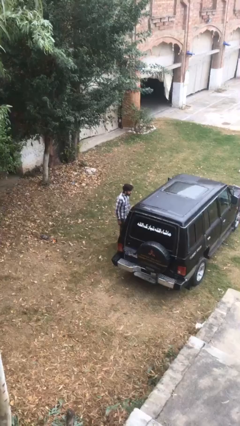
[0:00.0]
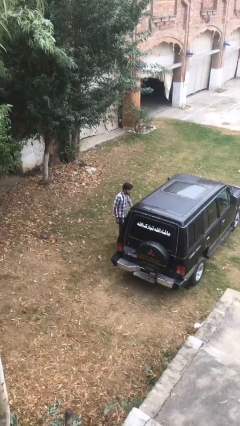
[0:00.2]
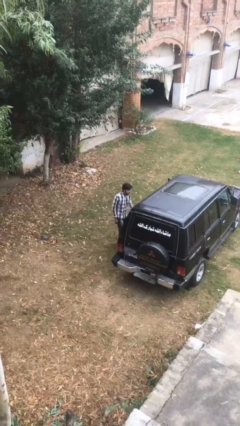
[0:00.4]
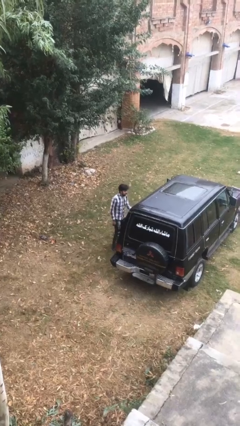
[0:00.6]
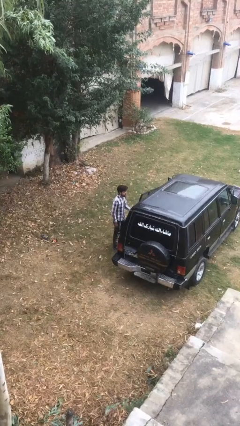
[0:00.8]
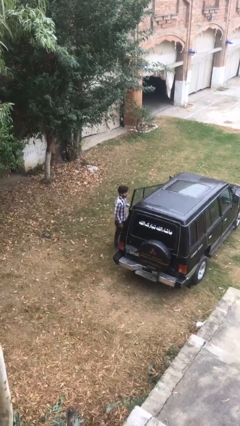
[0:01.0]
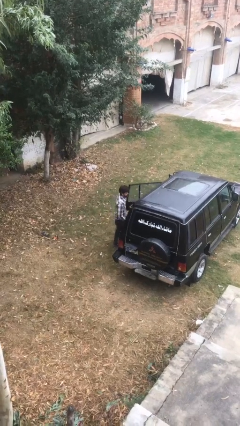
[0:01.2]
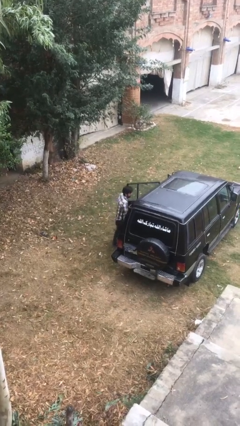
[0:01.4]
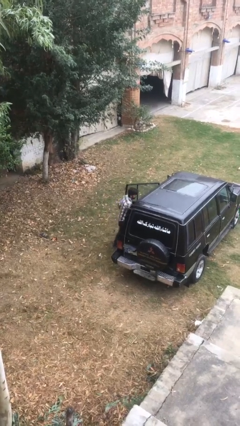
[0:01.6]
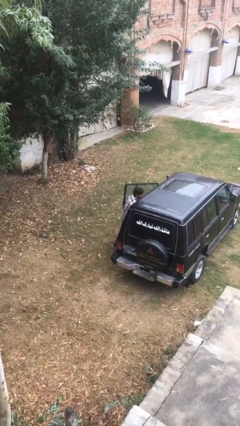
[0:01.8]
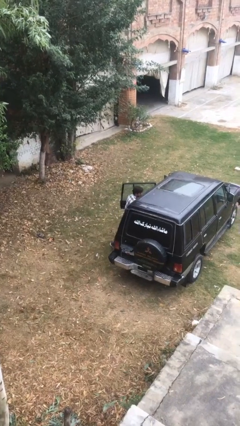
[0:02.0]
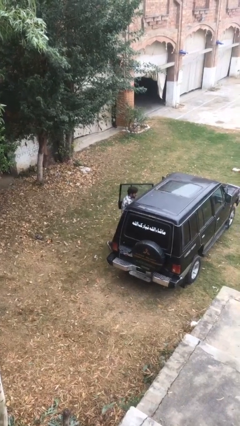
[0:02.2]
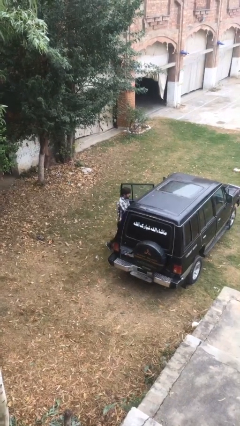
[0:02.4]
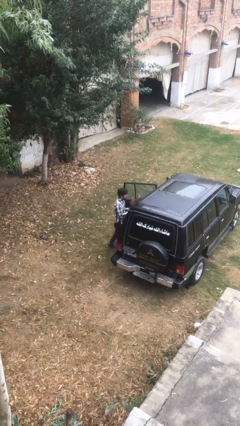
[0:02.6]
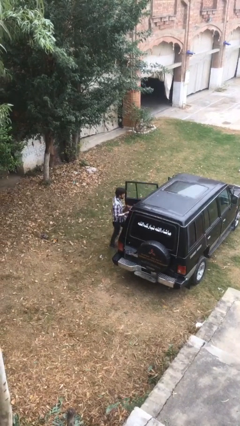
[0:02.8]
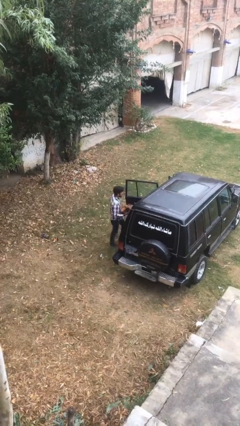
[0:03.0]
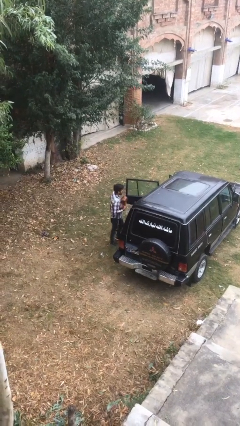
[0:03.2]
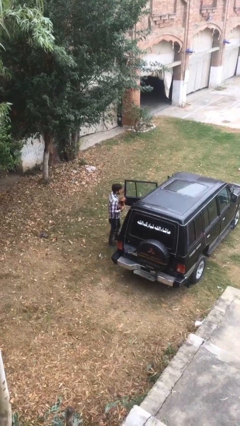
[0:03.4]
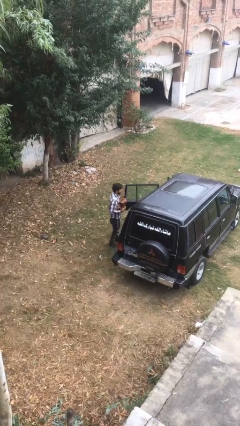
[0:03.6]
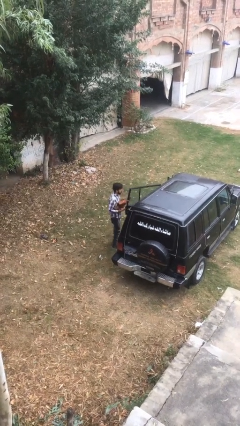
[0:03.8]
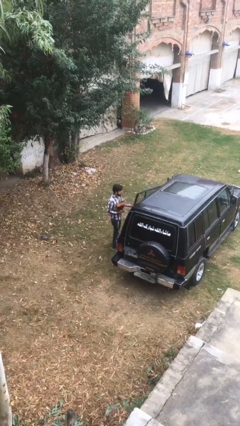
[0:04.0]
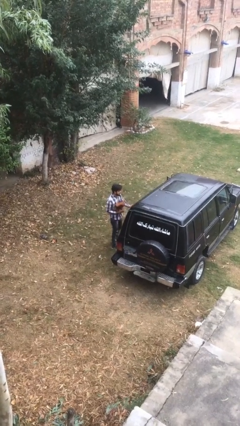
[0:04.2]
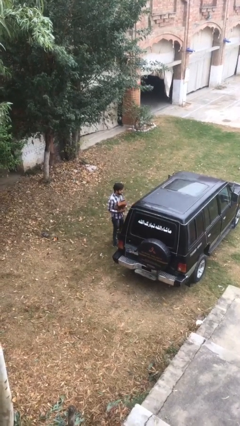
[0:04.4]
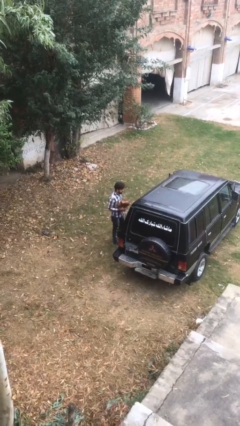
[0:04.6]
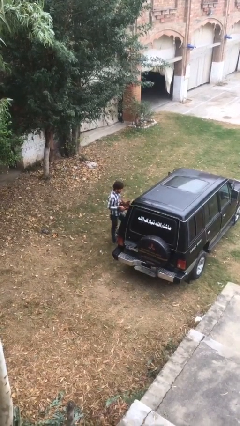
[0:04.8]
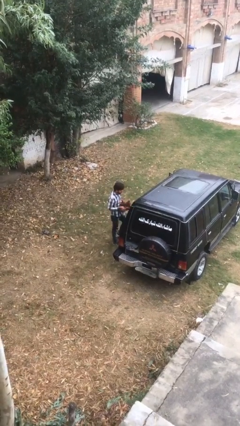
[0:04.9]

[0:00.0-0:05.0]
person unloads car

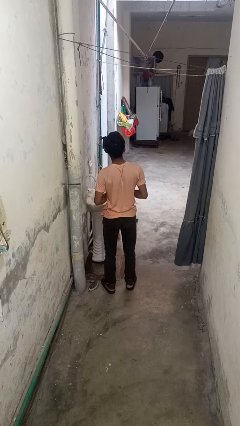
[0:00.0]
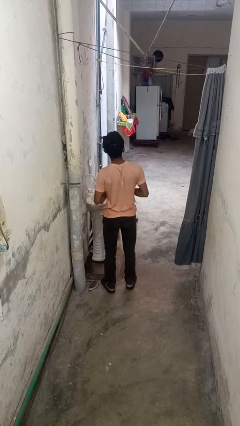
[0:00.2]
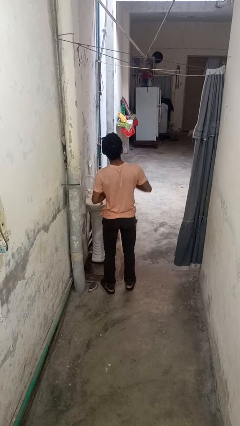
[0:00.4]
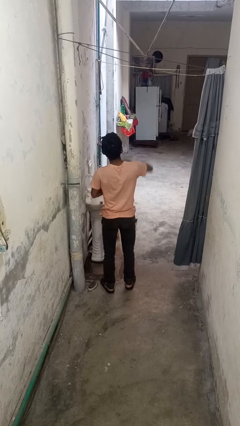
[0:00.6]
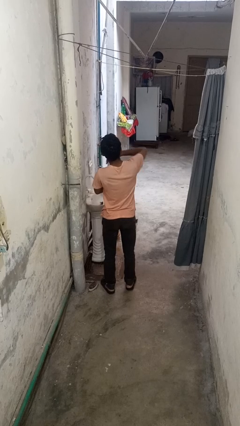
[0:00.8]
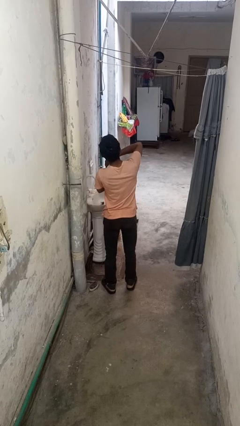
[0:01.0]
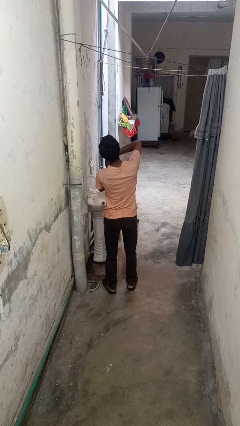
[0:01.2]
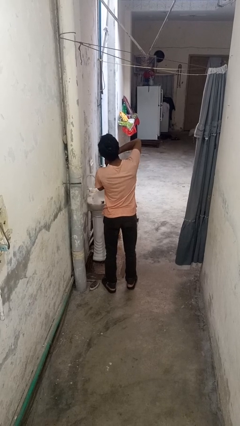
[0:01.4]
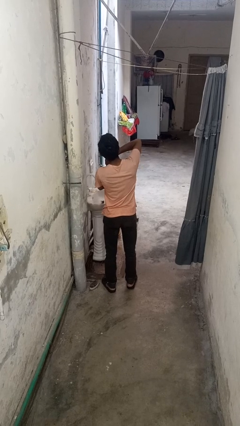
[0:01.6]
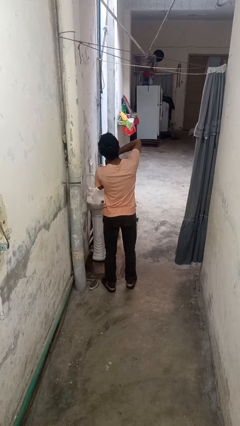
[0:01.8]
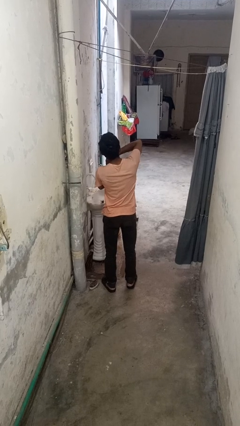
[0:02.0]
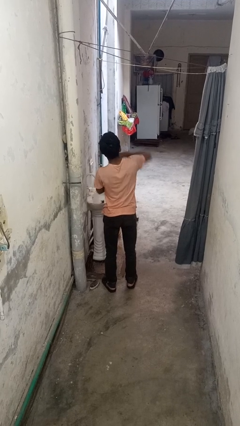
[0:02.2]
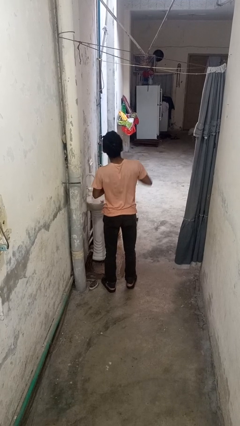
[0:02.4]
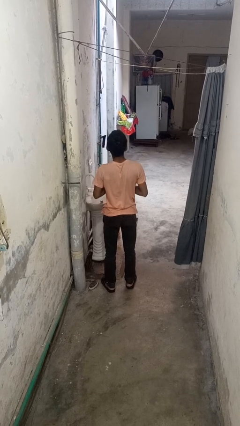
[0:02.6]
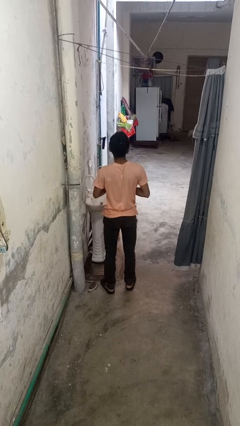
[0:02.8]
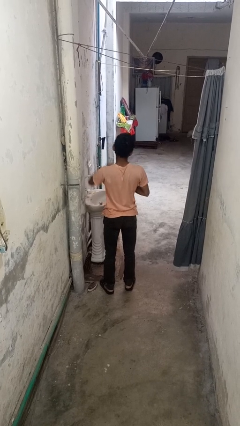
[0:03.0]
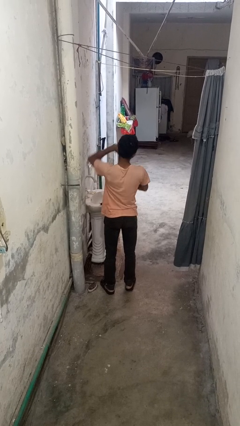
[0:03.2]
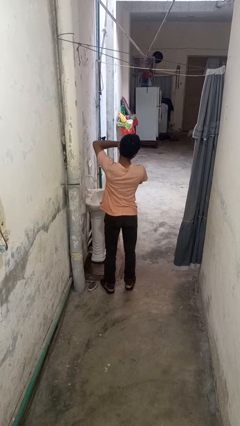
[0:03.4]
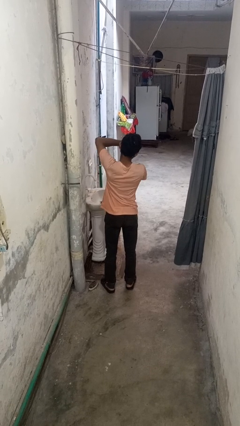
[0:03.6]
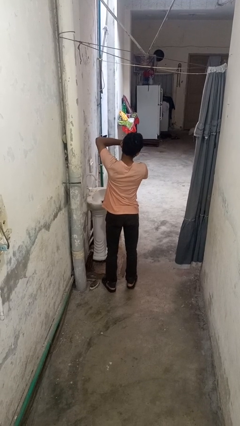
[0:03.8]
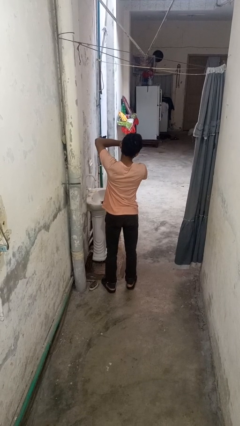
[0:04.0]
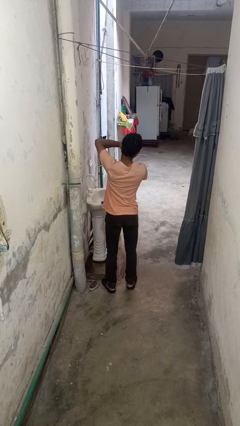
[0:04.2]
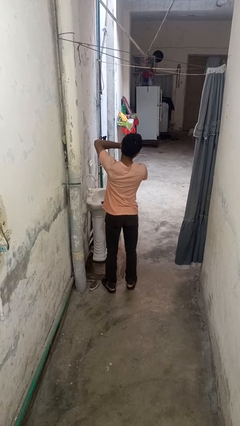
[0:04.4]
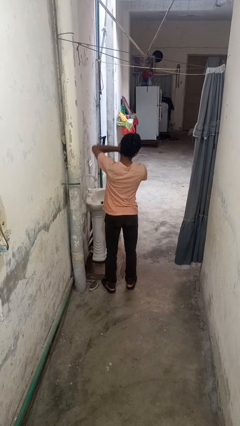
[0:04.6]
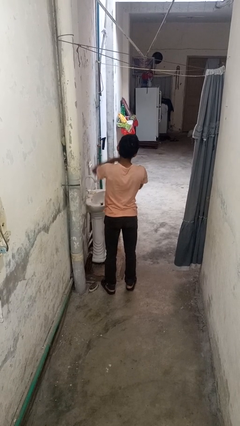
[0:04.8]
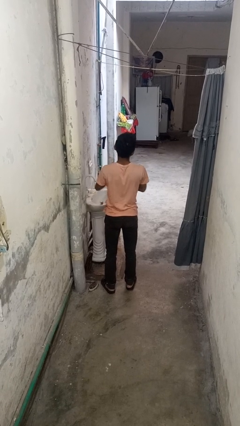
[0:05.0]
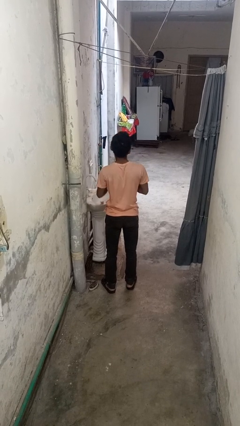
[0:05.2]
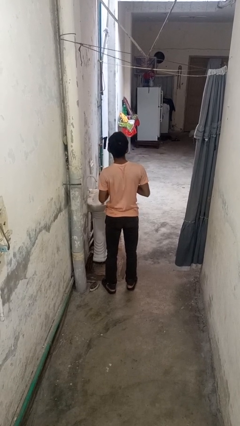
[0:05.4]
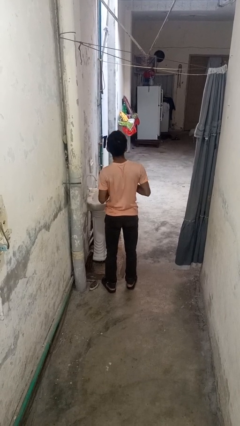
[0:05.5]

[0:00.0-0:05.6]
person applies deodorant

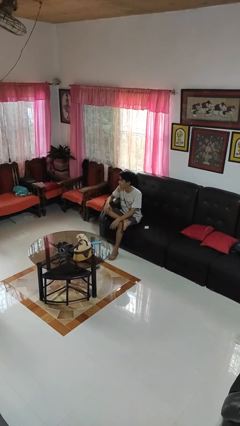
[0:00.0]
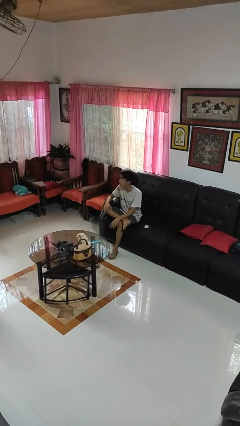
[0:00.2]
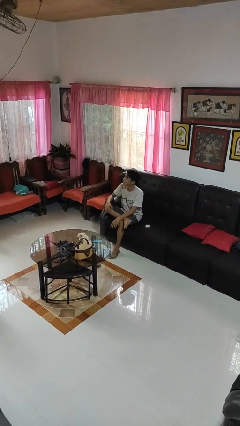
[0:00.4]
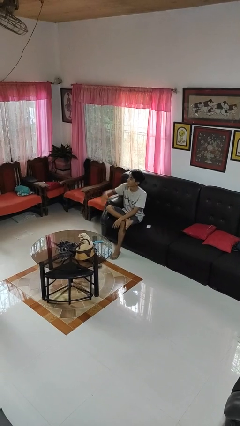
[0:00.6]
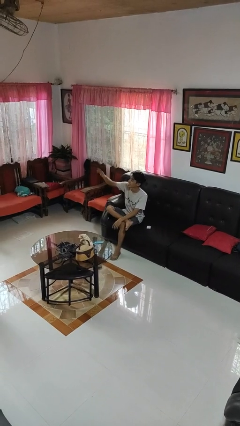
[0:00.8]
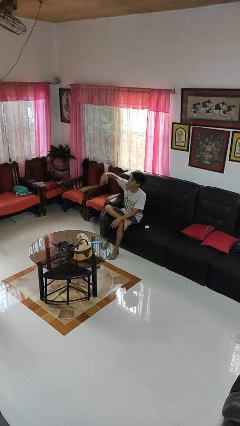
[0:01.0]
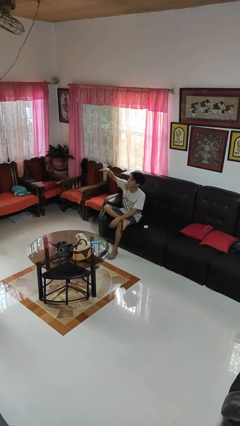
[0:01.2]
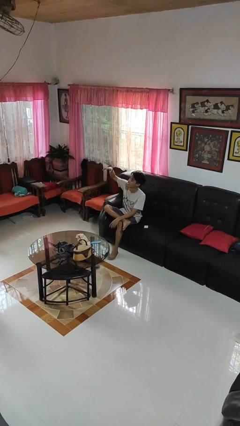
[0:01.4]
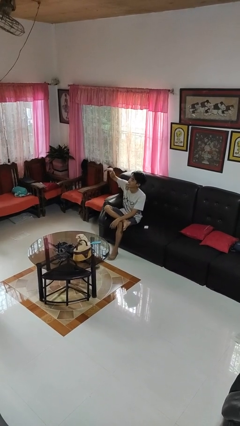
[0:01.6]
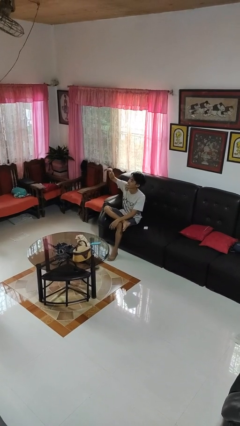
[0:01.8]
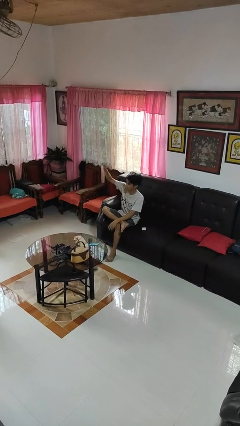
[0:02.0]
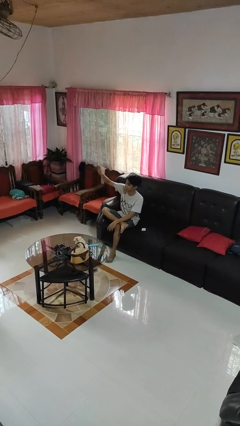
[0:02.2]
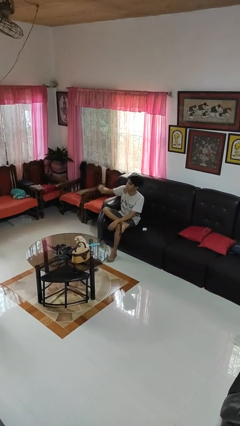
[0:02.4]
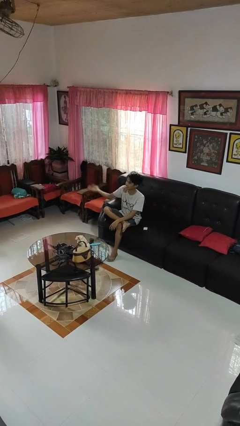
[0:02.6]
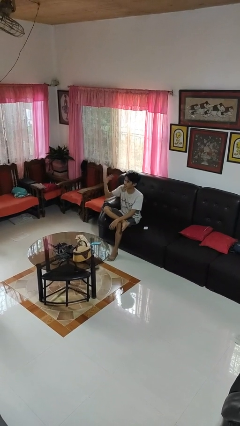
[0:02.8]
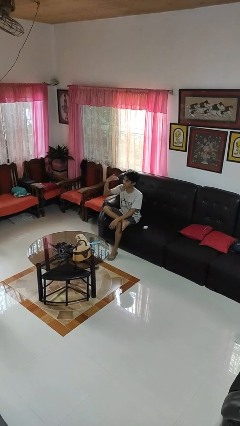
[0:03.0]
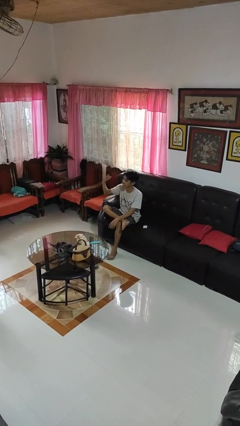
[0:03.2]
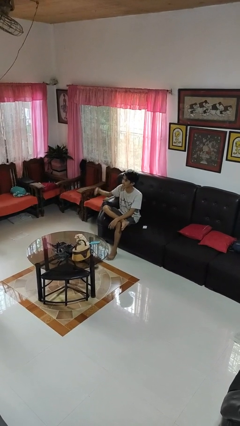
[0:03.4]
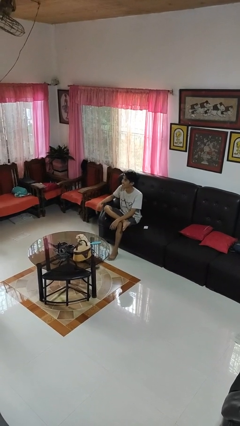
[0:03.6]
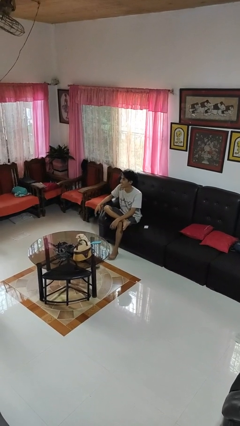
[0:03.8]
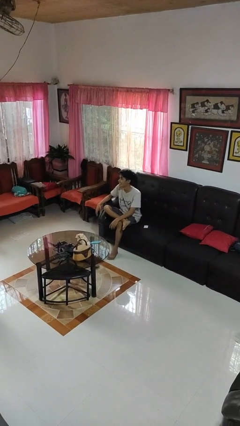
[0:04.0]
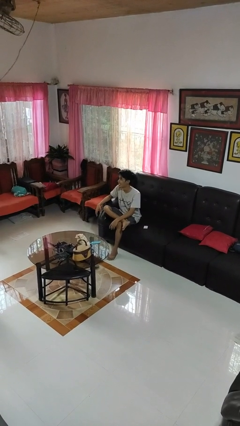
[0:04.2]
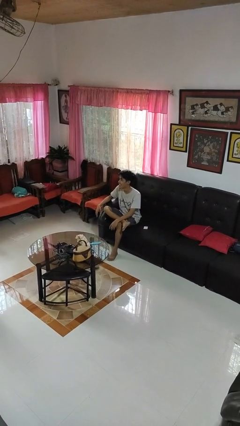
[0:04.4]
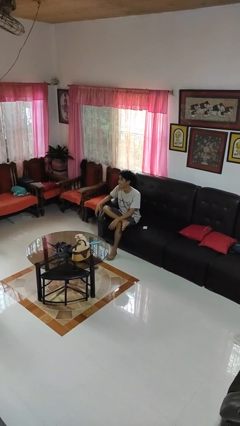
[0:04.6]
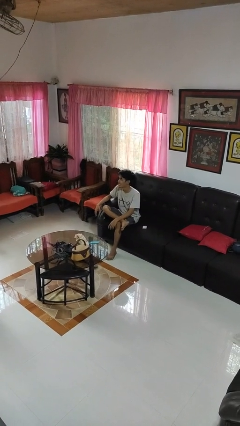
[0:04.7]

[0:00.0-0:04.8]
person gestures come here

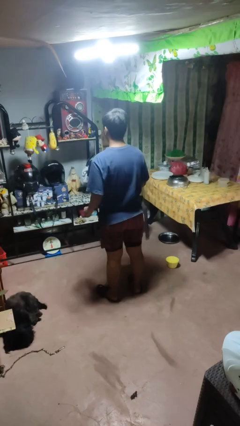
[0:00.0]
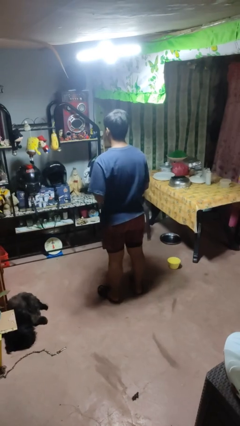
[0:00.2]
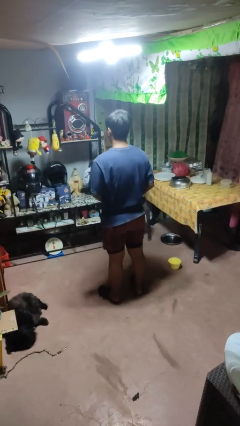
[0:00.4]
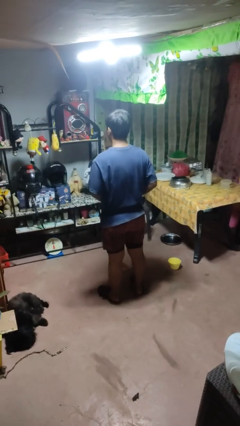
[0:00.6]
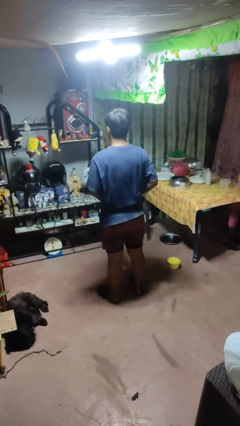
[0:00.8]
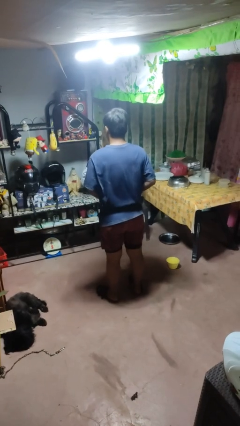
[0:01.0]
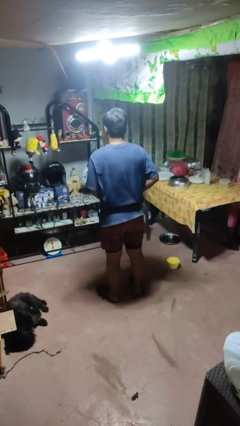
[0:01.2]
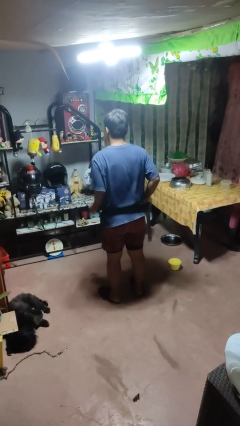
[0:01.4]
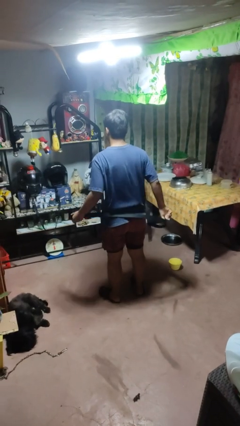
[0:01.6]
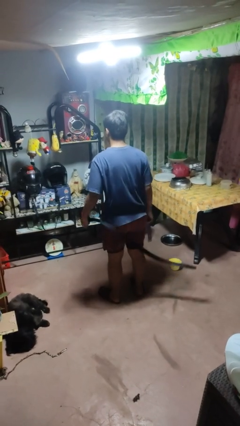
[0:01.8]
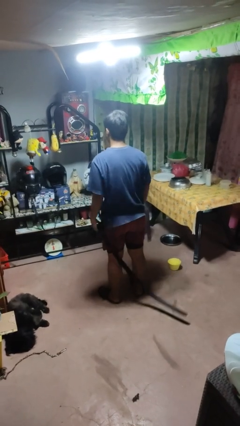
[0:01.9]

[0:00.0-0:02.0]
person takes off belt

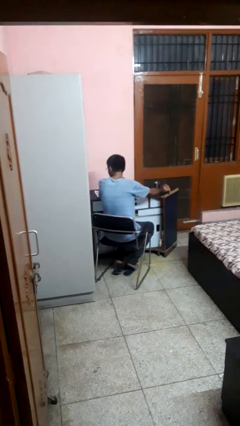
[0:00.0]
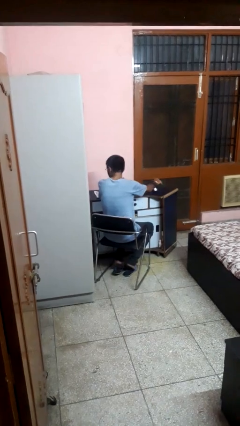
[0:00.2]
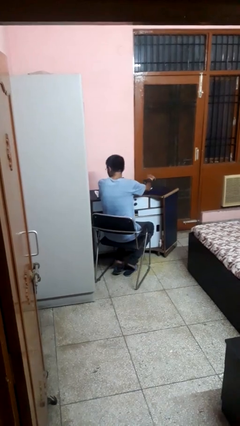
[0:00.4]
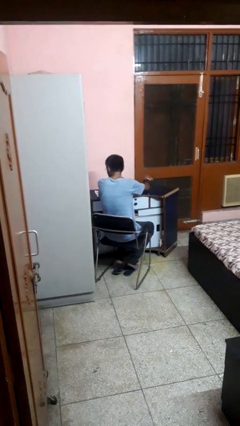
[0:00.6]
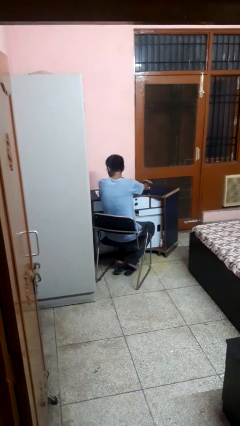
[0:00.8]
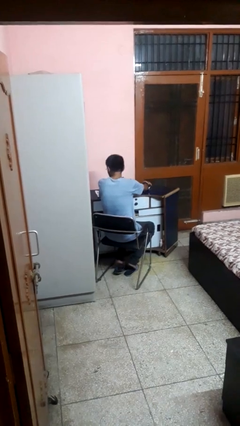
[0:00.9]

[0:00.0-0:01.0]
person knocks over glass
